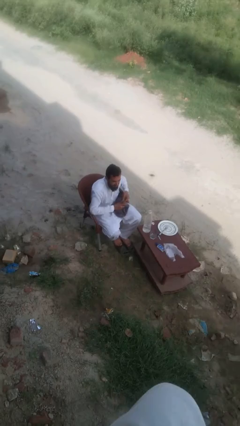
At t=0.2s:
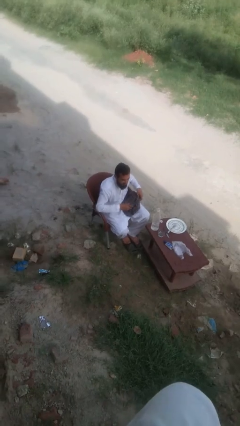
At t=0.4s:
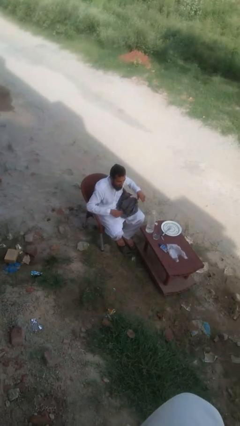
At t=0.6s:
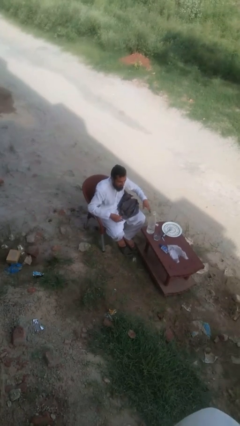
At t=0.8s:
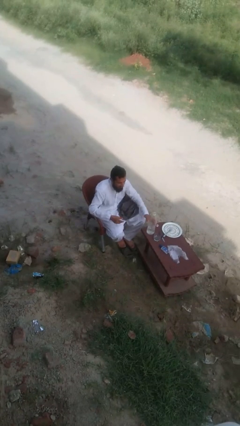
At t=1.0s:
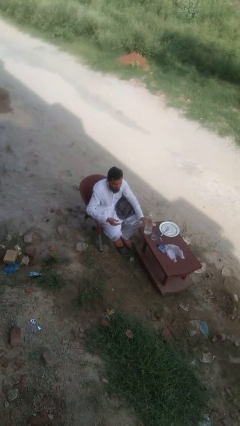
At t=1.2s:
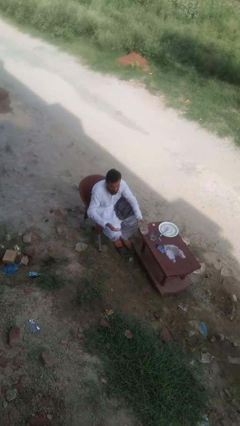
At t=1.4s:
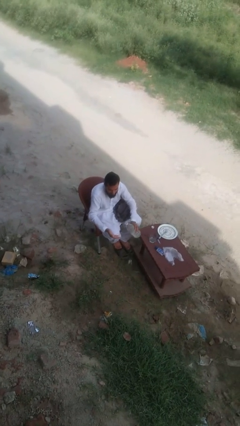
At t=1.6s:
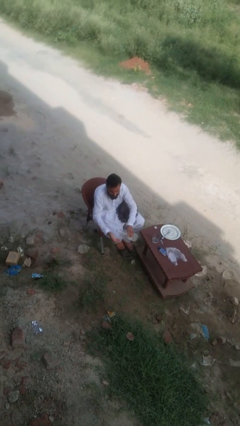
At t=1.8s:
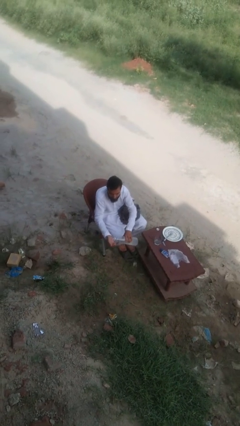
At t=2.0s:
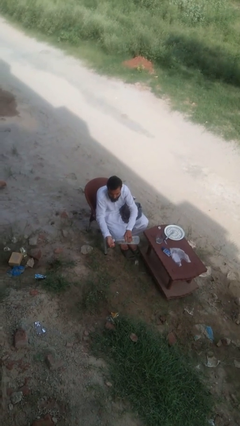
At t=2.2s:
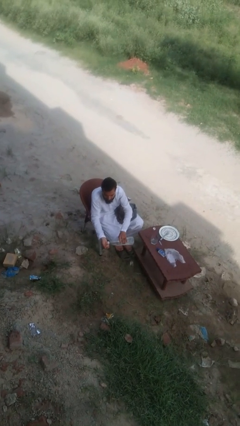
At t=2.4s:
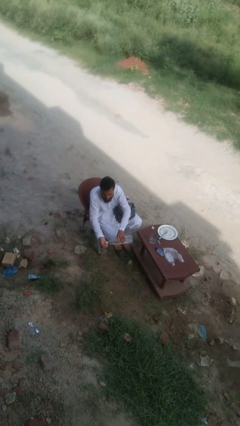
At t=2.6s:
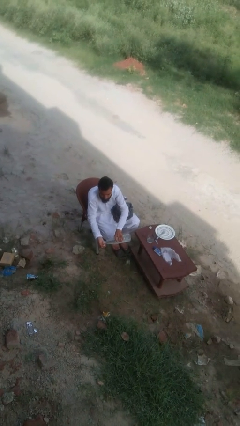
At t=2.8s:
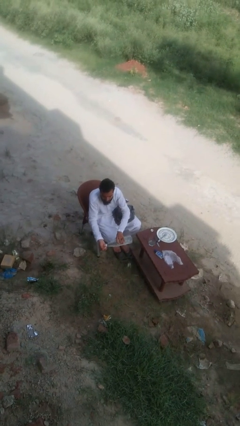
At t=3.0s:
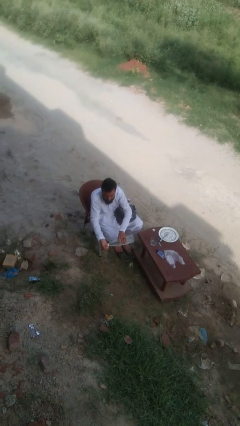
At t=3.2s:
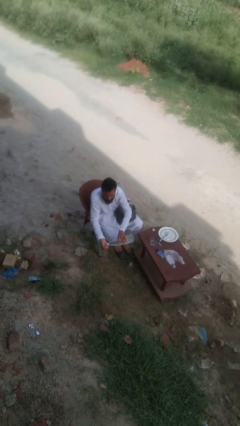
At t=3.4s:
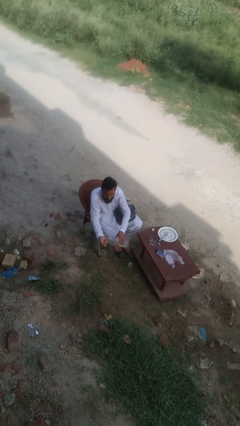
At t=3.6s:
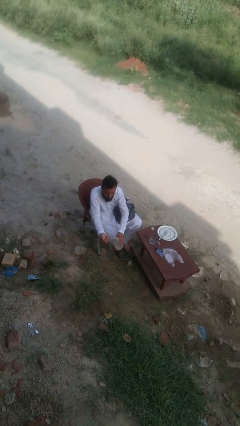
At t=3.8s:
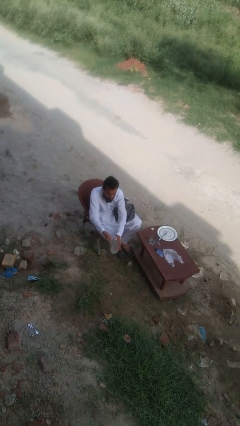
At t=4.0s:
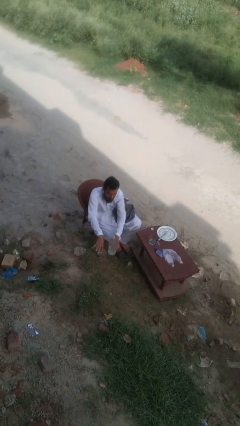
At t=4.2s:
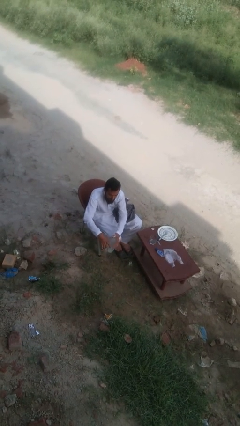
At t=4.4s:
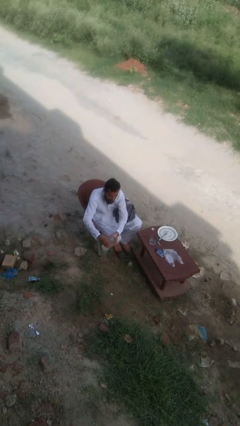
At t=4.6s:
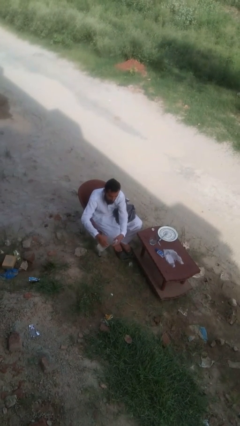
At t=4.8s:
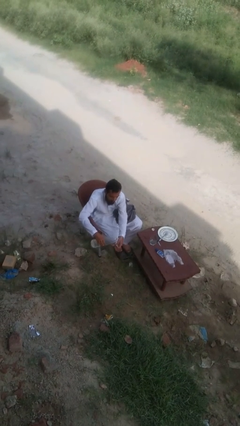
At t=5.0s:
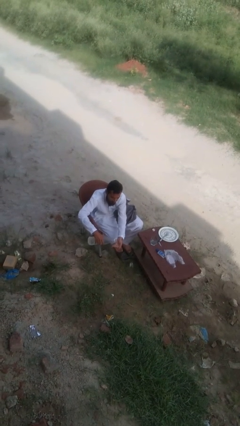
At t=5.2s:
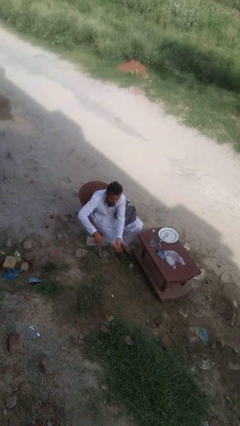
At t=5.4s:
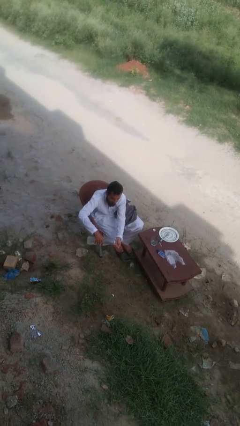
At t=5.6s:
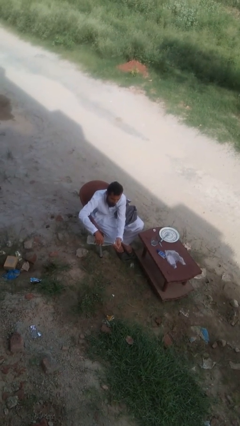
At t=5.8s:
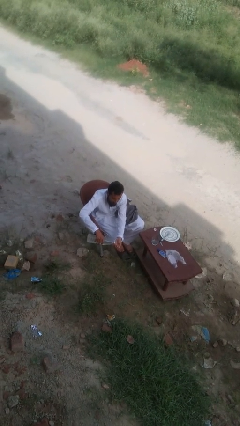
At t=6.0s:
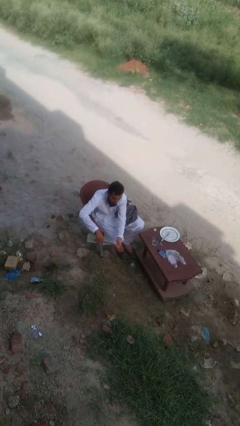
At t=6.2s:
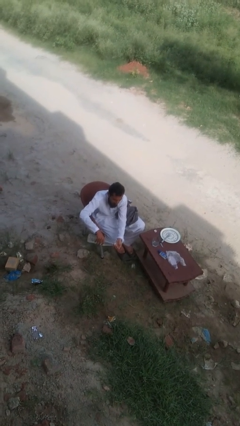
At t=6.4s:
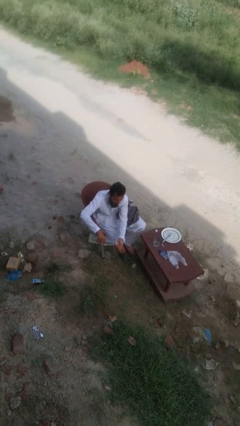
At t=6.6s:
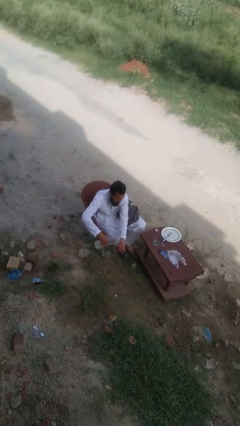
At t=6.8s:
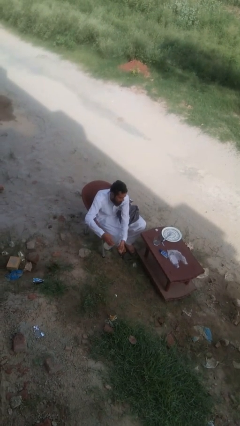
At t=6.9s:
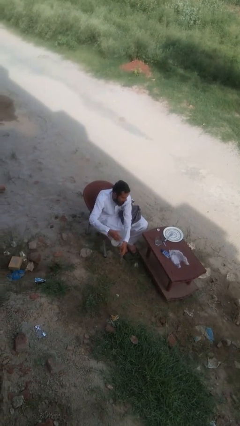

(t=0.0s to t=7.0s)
person washes hands

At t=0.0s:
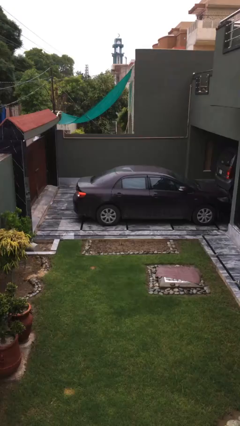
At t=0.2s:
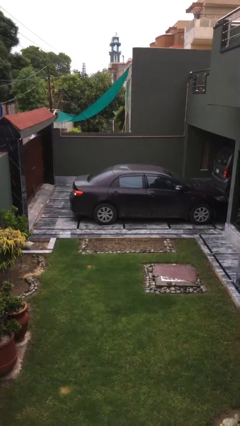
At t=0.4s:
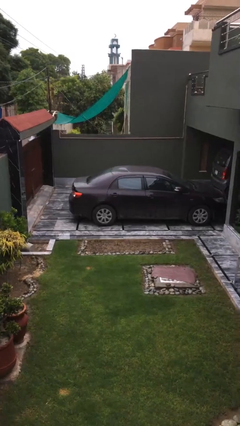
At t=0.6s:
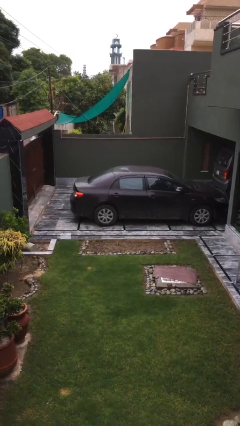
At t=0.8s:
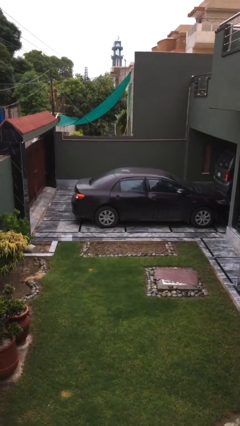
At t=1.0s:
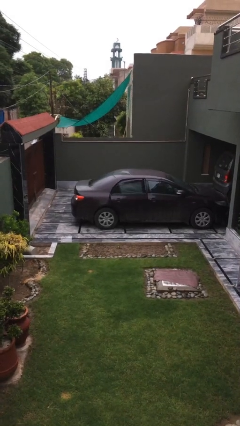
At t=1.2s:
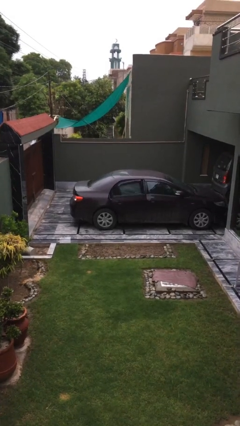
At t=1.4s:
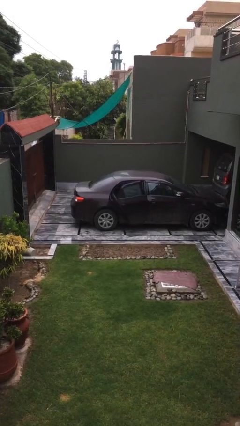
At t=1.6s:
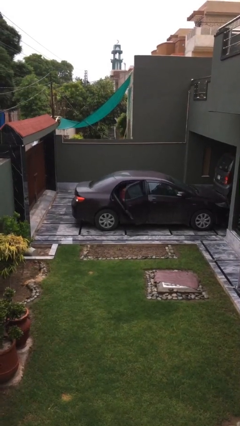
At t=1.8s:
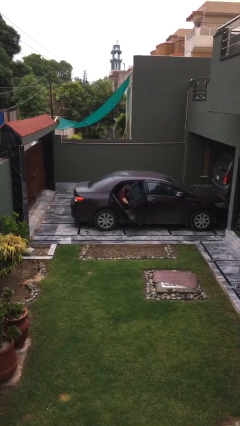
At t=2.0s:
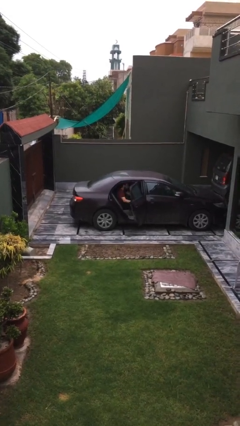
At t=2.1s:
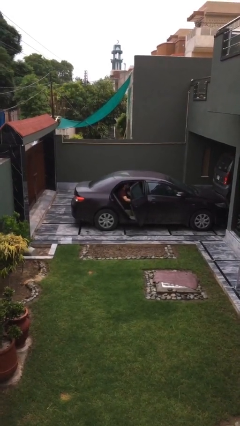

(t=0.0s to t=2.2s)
person opens car door

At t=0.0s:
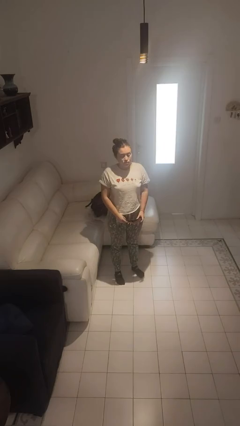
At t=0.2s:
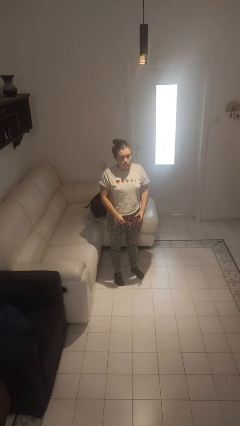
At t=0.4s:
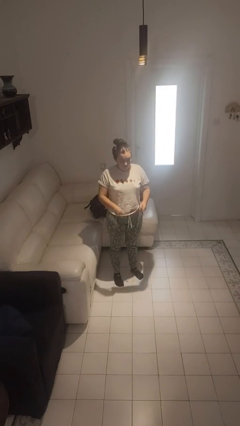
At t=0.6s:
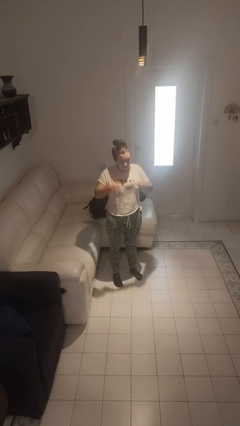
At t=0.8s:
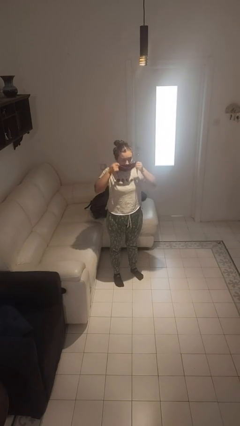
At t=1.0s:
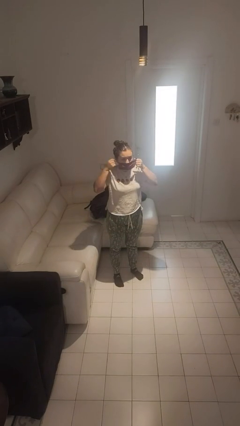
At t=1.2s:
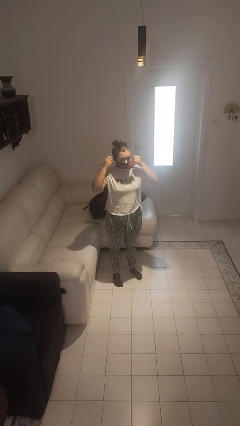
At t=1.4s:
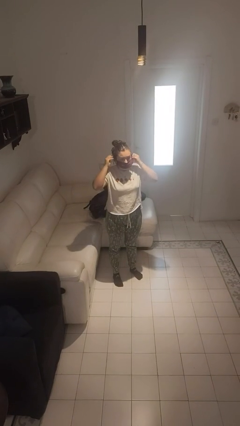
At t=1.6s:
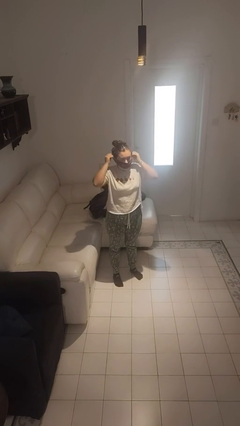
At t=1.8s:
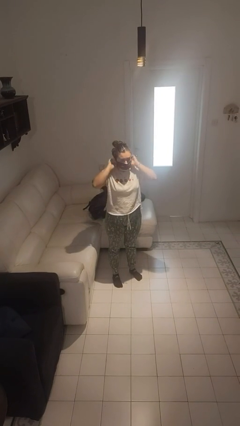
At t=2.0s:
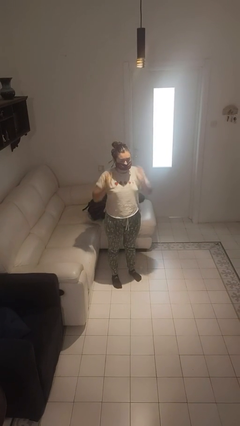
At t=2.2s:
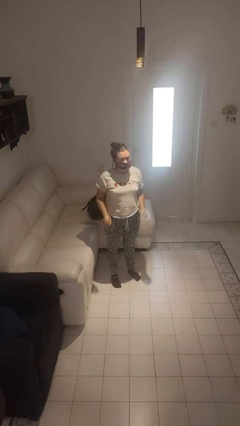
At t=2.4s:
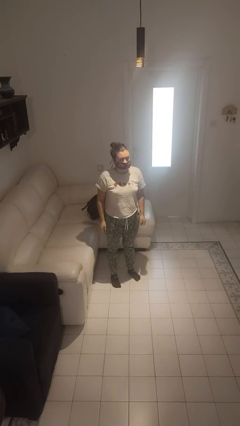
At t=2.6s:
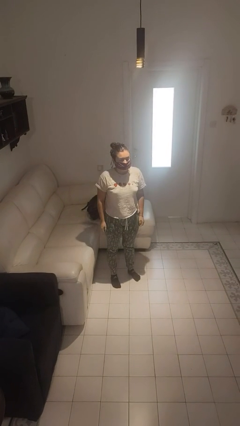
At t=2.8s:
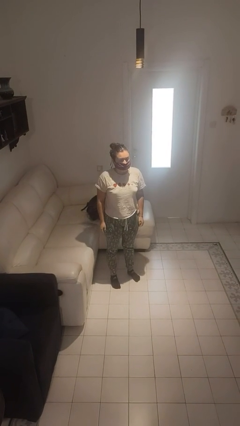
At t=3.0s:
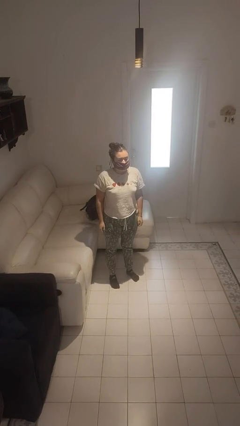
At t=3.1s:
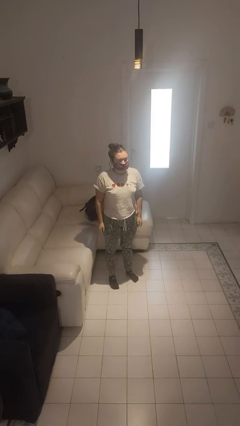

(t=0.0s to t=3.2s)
person puts on facemask

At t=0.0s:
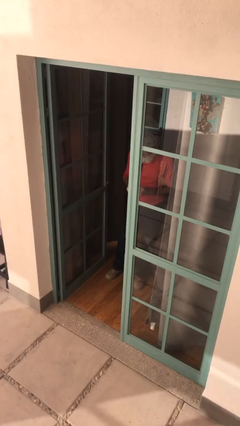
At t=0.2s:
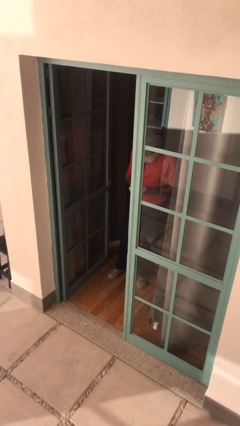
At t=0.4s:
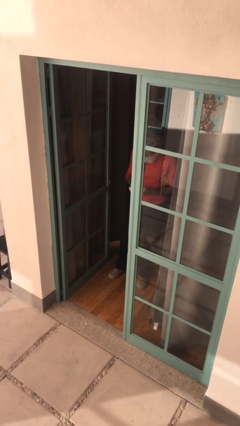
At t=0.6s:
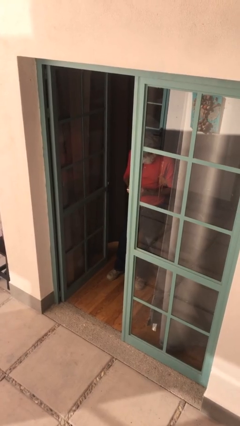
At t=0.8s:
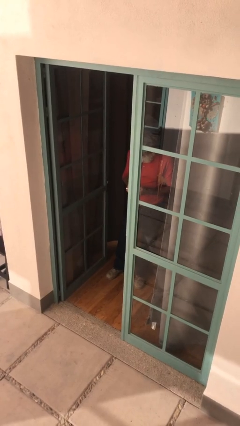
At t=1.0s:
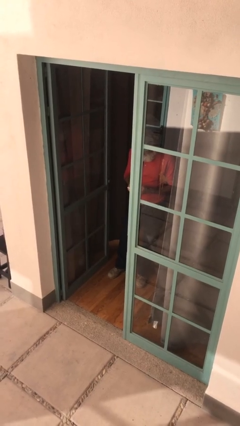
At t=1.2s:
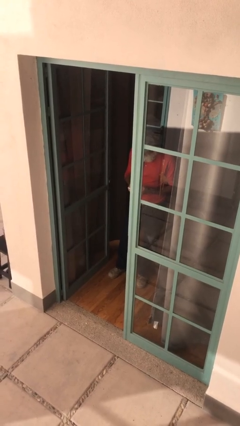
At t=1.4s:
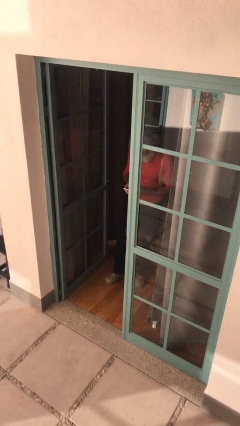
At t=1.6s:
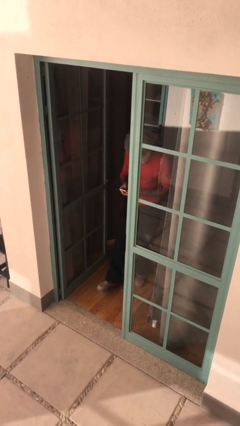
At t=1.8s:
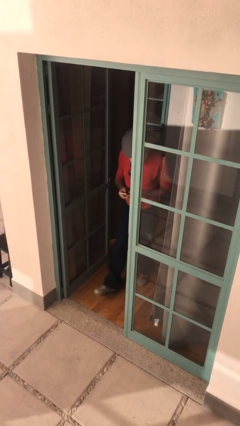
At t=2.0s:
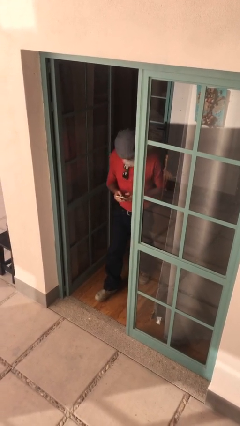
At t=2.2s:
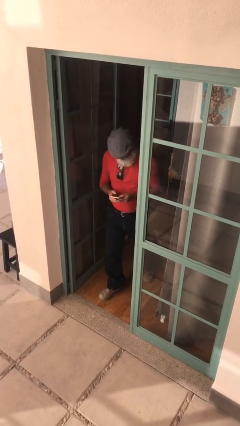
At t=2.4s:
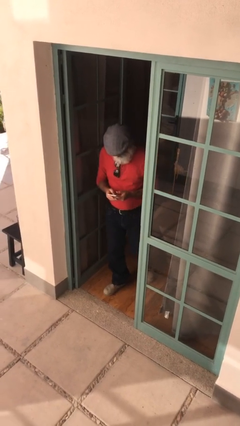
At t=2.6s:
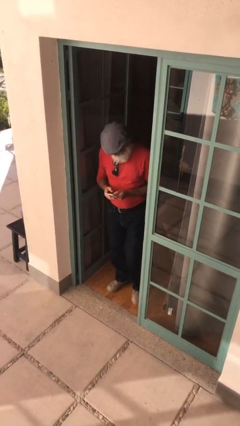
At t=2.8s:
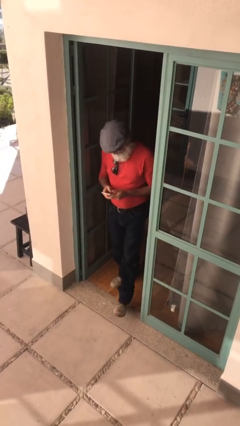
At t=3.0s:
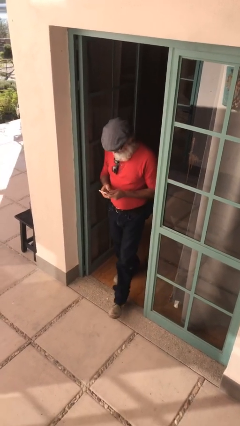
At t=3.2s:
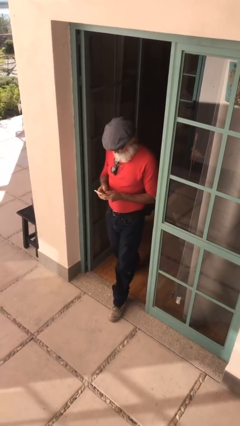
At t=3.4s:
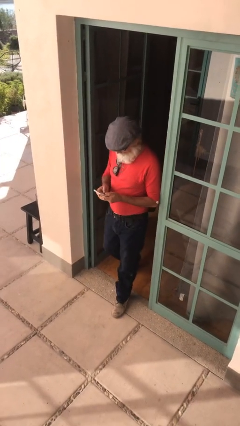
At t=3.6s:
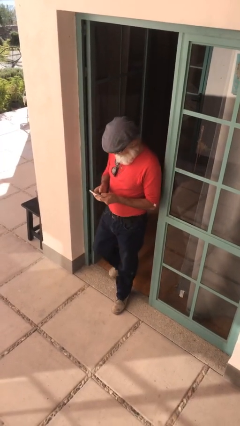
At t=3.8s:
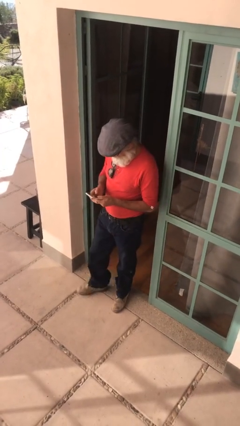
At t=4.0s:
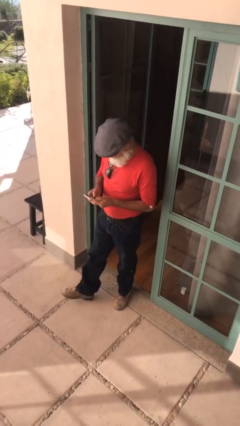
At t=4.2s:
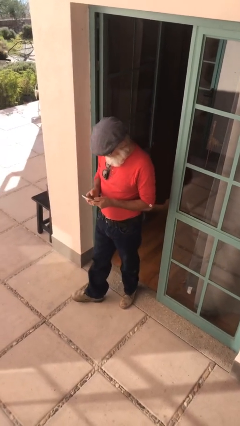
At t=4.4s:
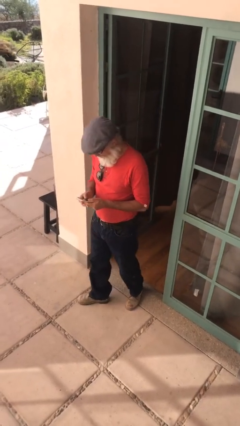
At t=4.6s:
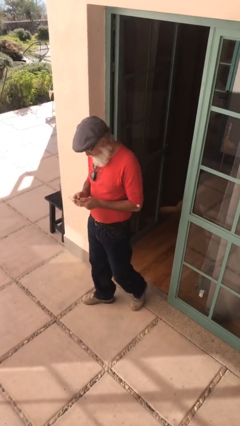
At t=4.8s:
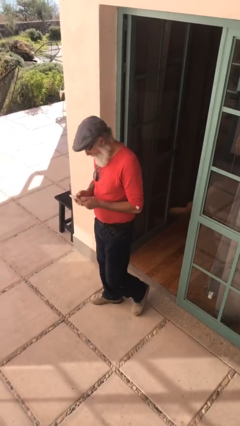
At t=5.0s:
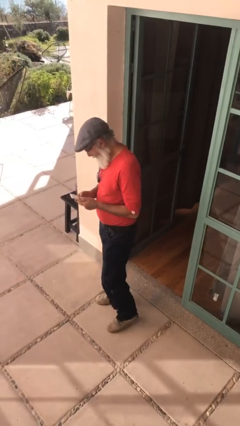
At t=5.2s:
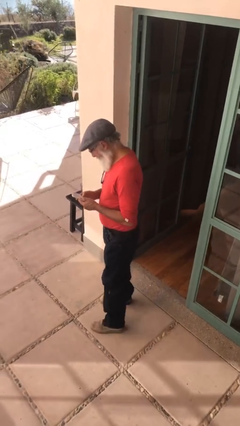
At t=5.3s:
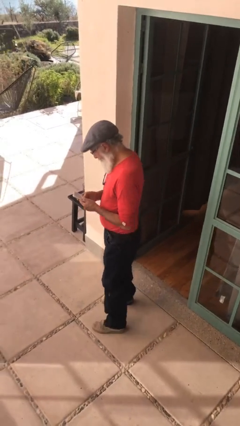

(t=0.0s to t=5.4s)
person enters scene through structure
